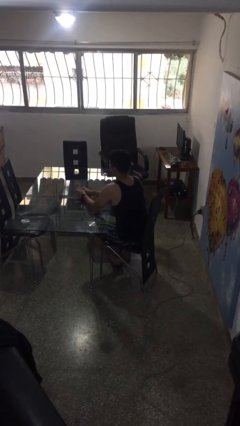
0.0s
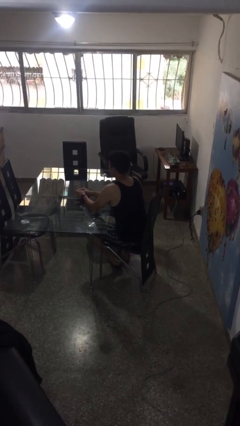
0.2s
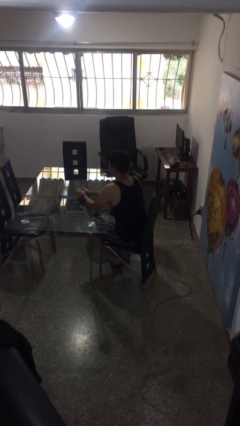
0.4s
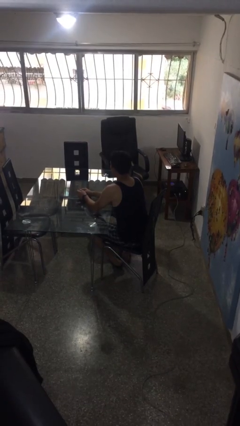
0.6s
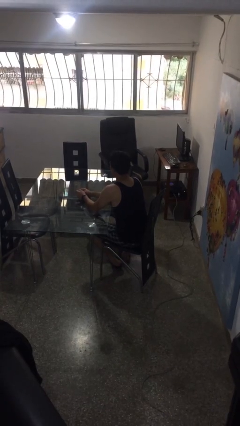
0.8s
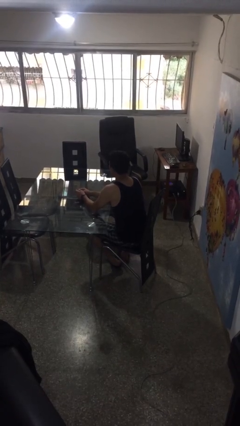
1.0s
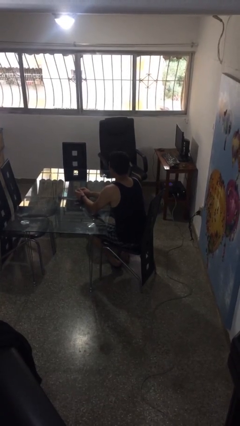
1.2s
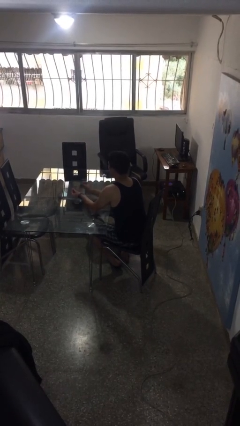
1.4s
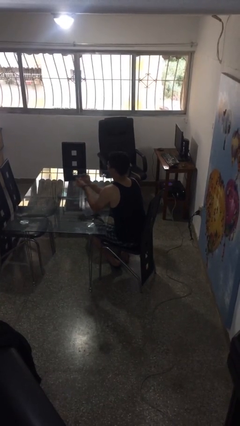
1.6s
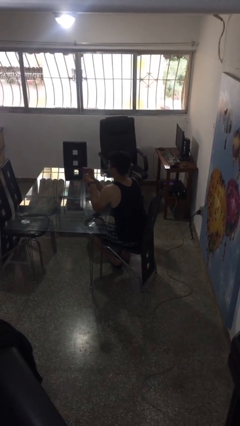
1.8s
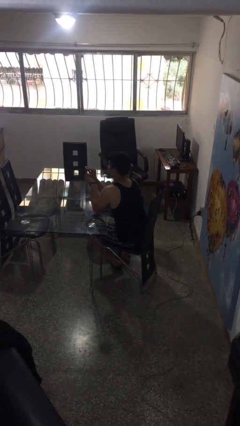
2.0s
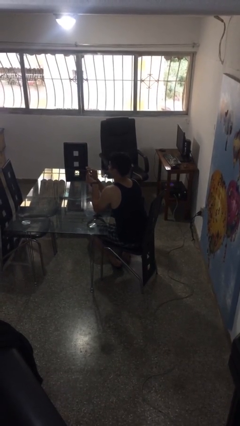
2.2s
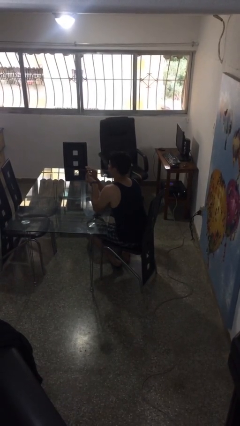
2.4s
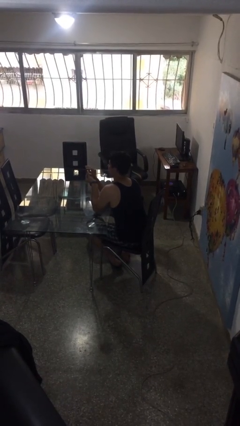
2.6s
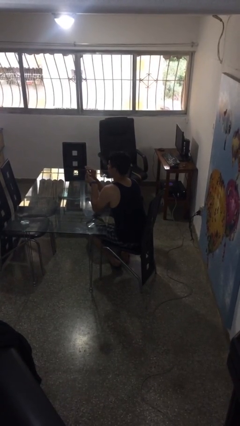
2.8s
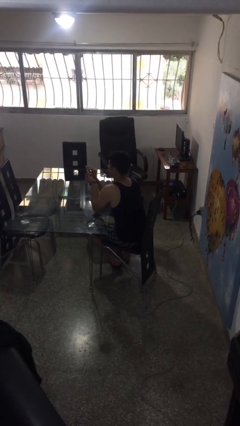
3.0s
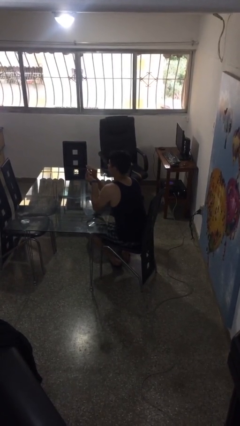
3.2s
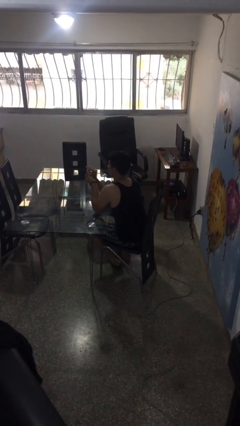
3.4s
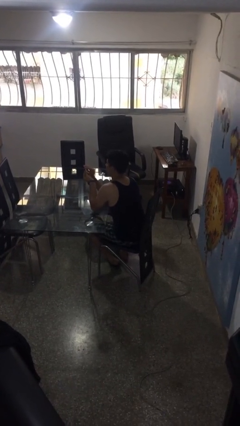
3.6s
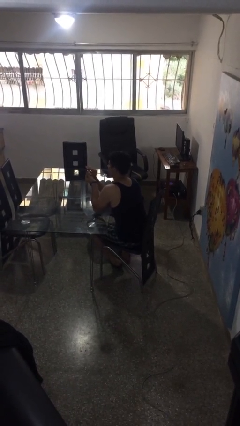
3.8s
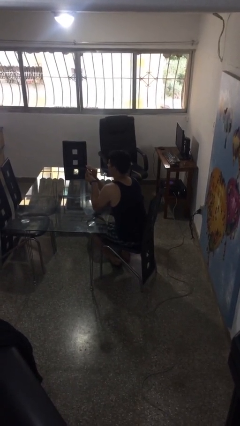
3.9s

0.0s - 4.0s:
person files fingernails

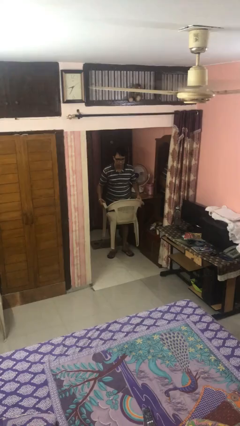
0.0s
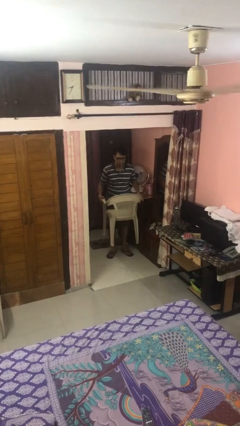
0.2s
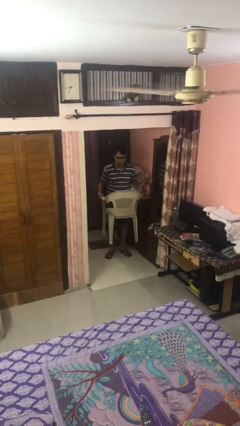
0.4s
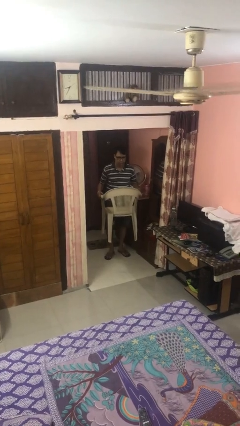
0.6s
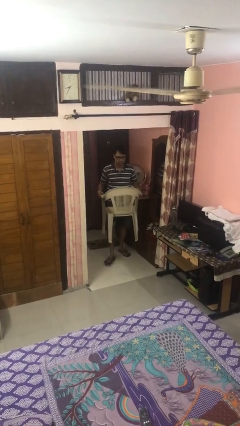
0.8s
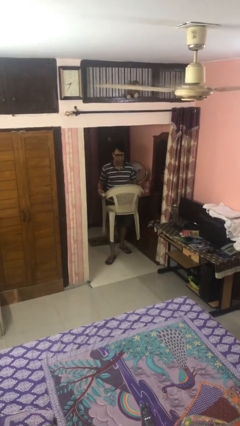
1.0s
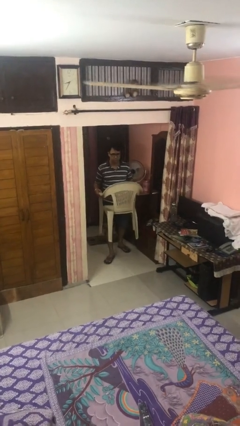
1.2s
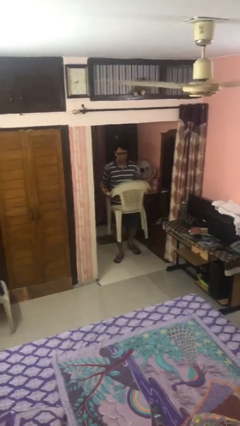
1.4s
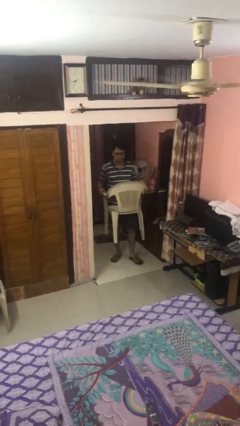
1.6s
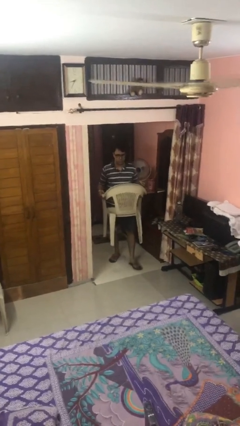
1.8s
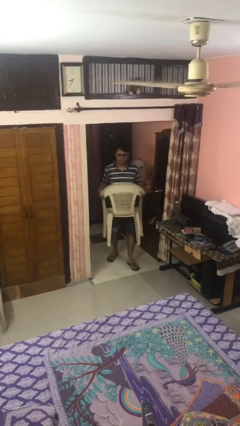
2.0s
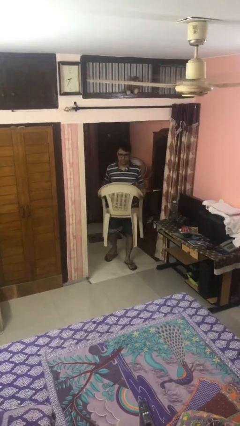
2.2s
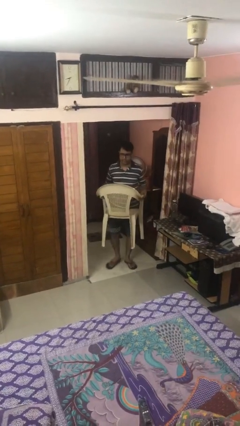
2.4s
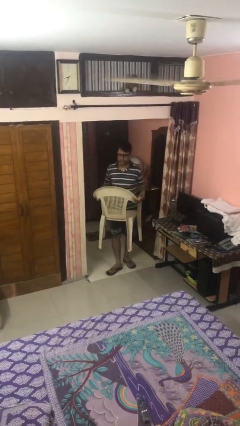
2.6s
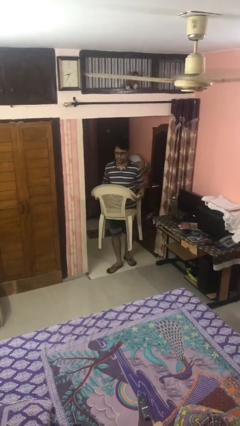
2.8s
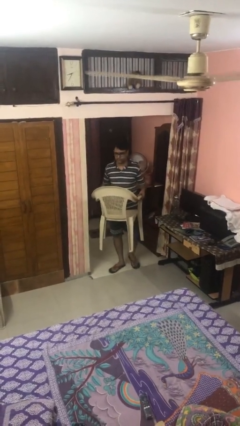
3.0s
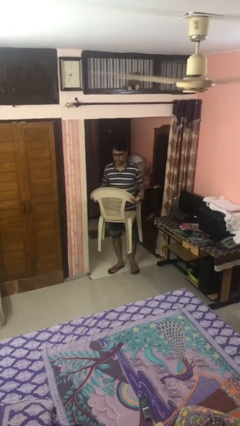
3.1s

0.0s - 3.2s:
person carries furniture

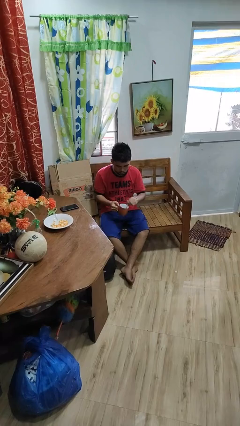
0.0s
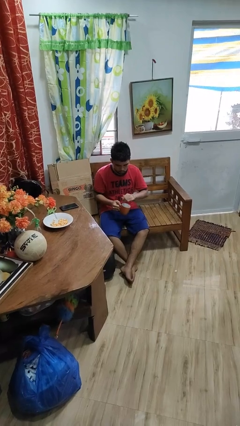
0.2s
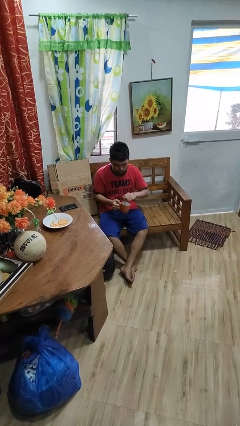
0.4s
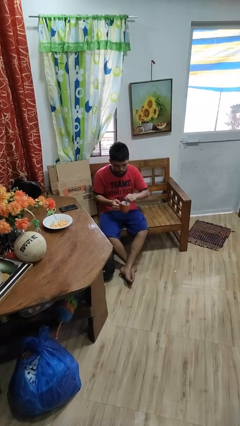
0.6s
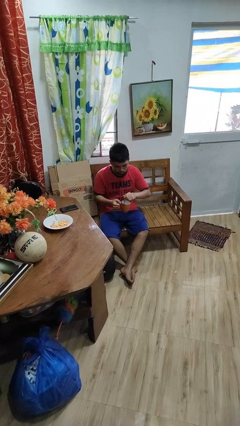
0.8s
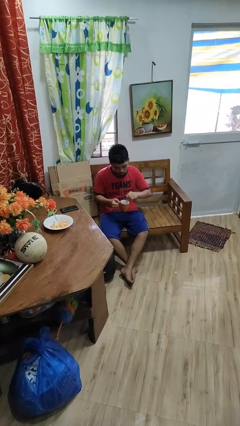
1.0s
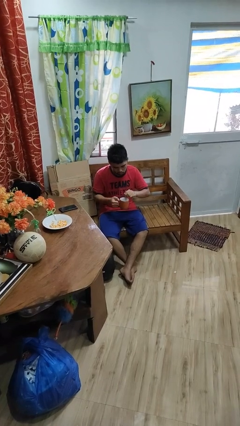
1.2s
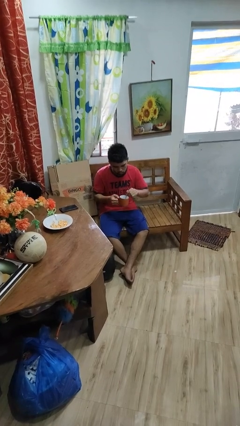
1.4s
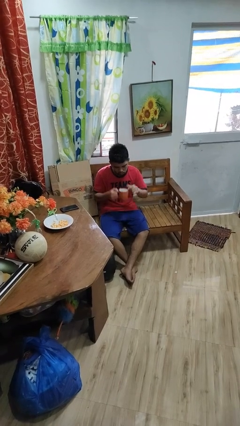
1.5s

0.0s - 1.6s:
person stirs mug

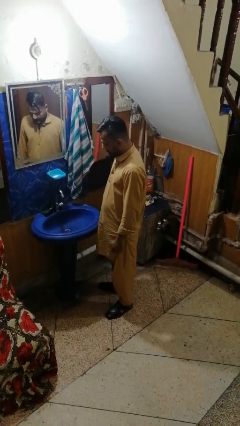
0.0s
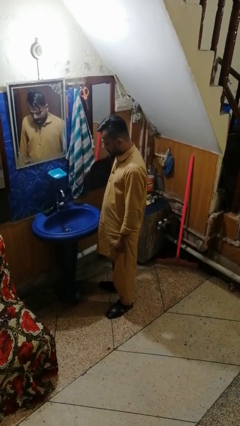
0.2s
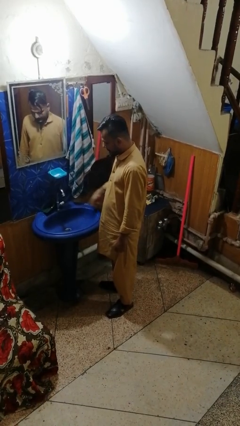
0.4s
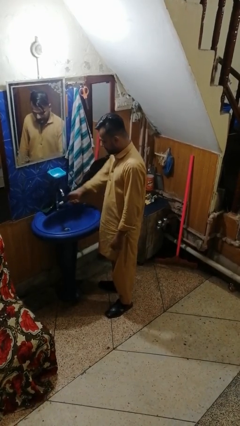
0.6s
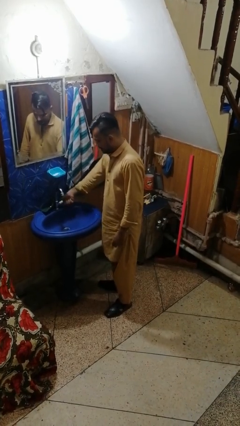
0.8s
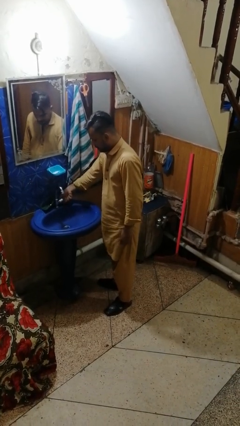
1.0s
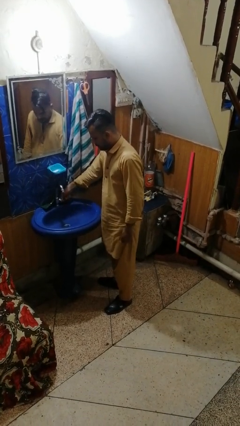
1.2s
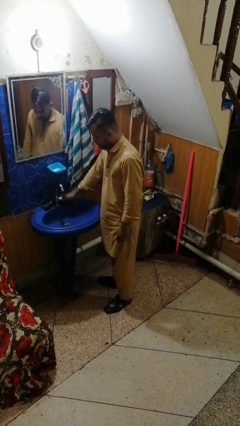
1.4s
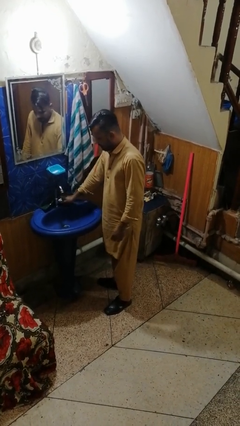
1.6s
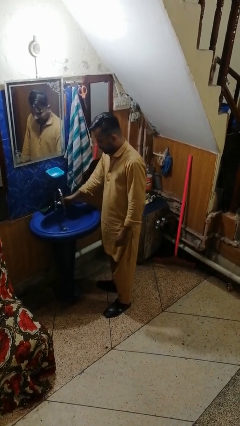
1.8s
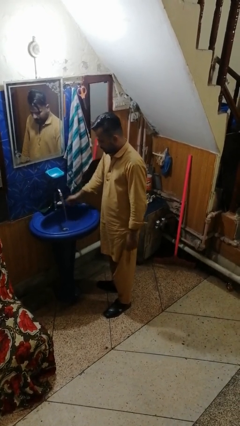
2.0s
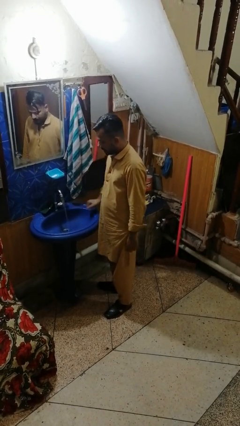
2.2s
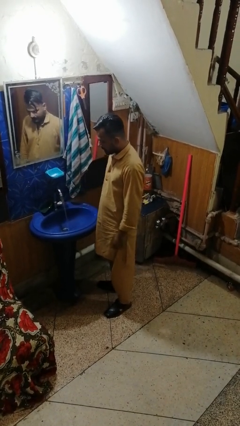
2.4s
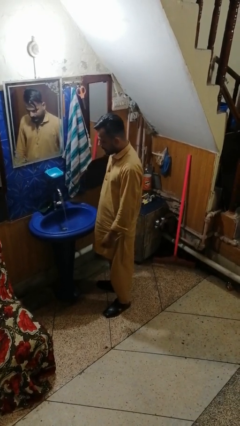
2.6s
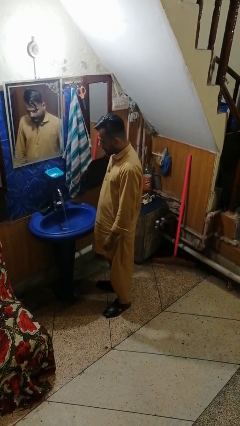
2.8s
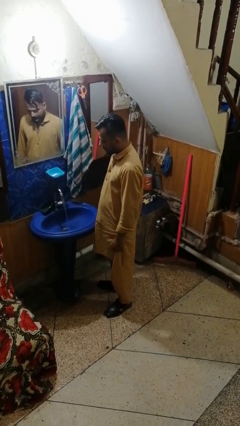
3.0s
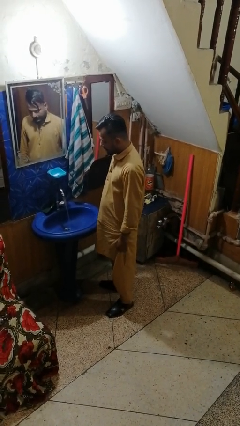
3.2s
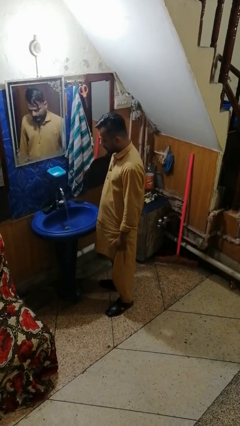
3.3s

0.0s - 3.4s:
person turns on faucet

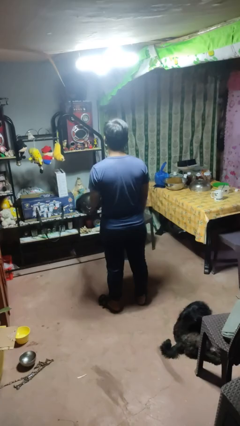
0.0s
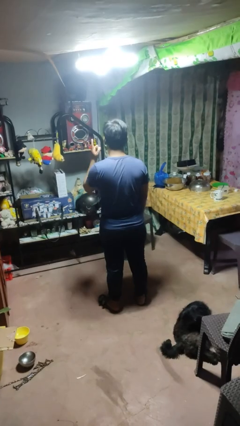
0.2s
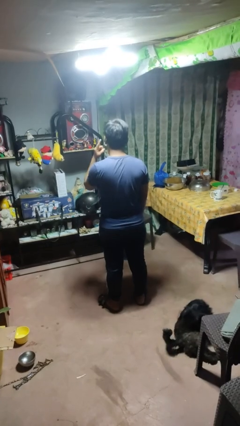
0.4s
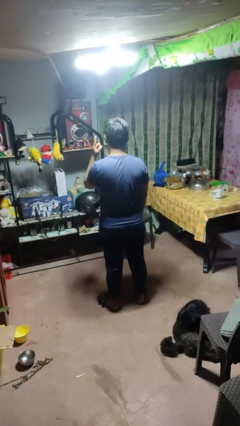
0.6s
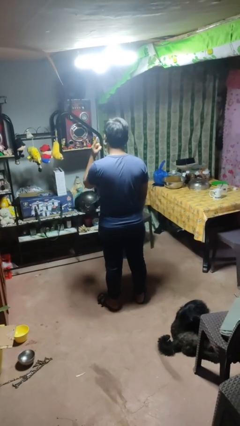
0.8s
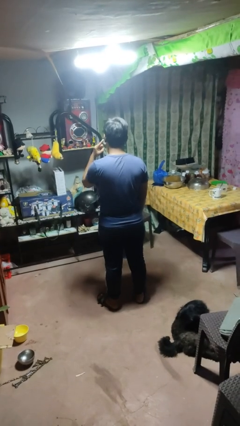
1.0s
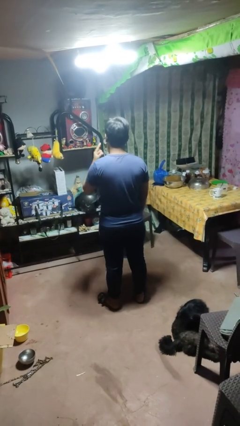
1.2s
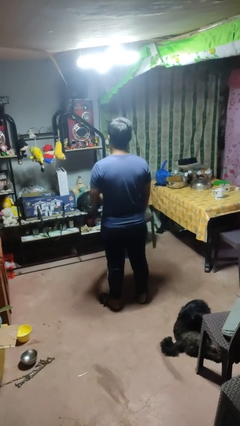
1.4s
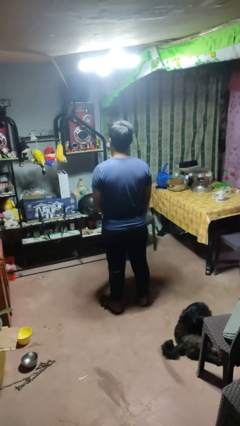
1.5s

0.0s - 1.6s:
person gestures listen closely

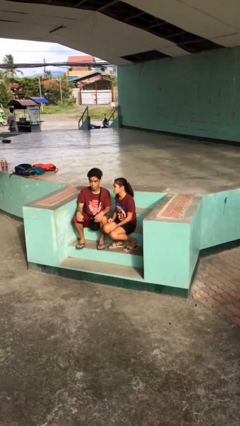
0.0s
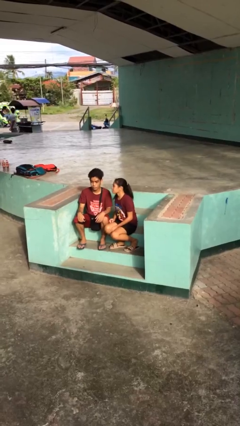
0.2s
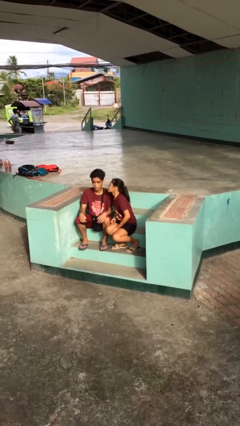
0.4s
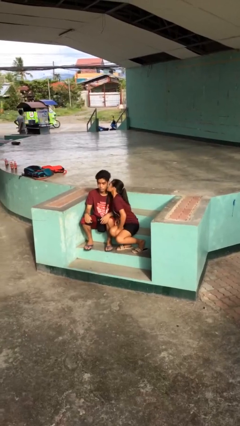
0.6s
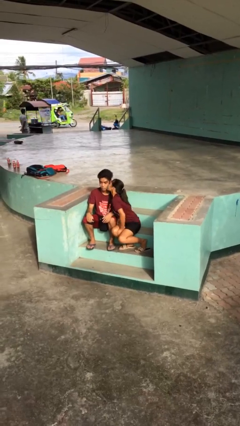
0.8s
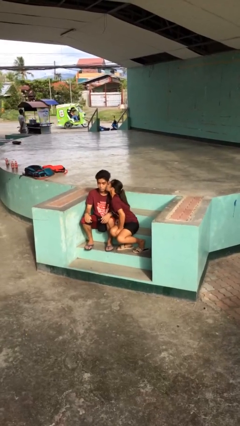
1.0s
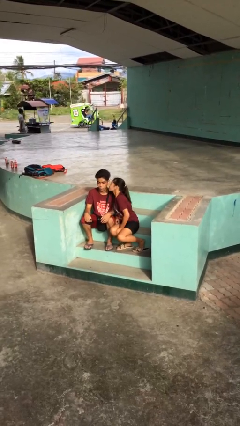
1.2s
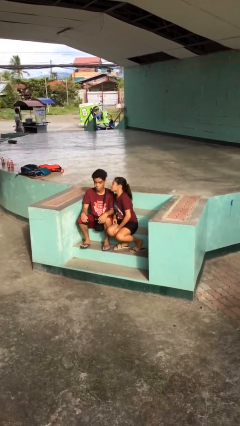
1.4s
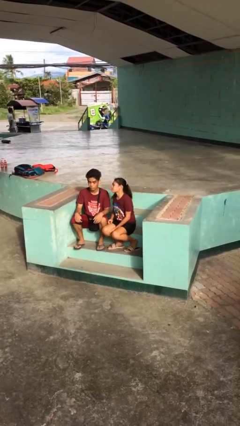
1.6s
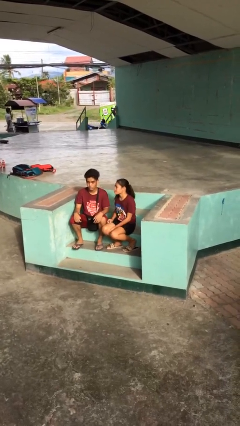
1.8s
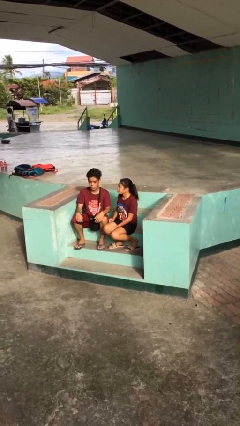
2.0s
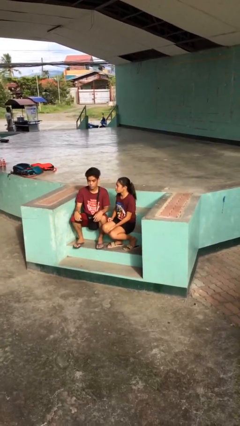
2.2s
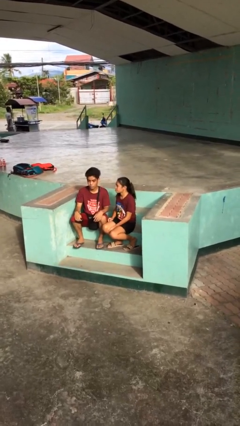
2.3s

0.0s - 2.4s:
person kisses cheek of person

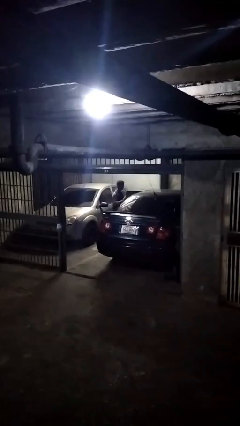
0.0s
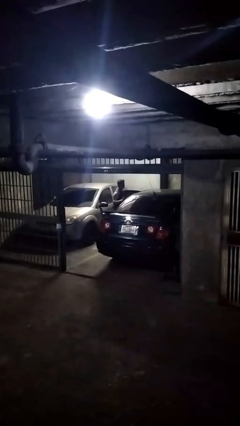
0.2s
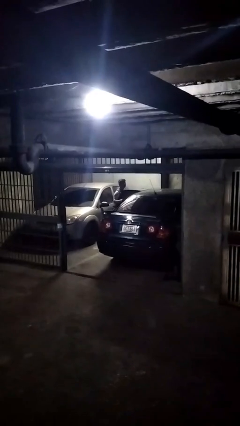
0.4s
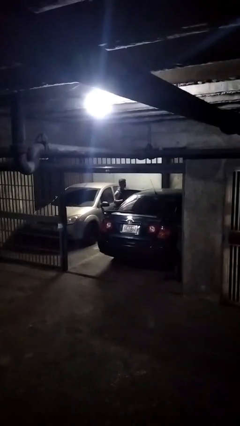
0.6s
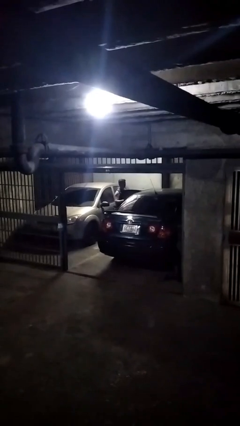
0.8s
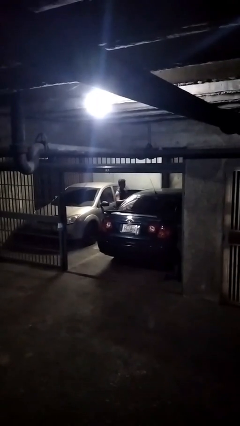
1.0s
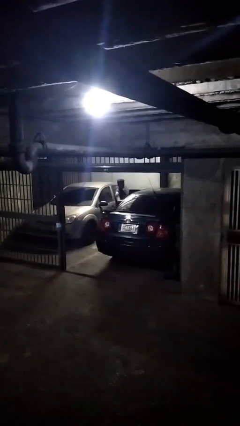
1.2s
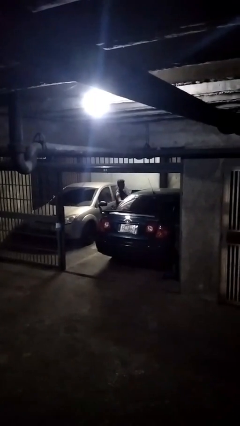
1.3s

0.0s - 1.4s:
person opens car door
